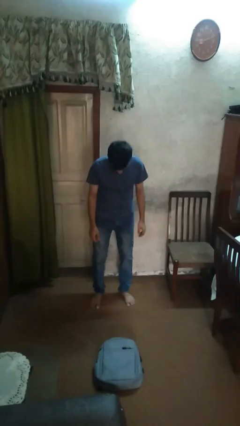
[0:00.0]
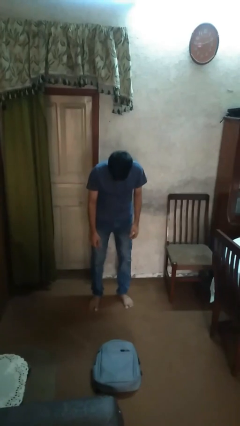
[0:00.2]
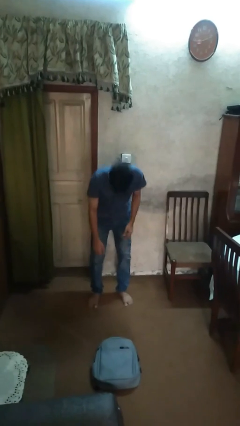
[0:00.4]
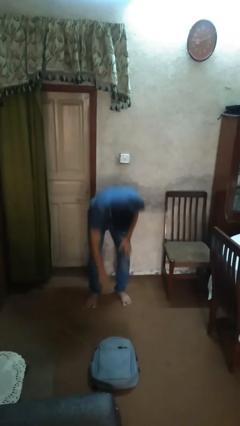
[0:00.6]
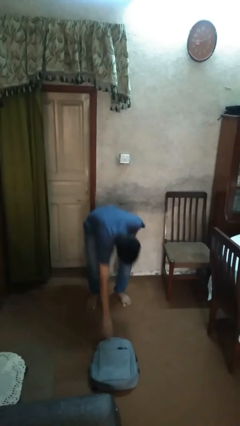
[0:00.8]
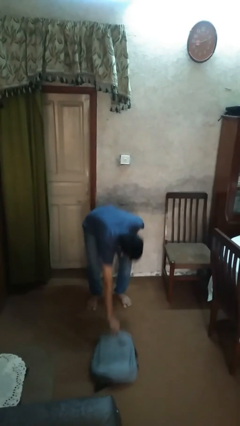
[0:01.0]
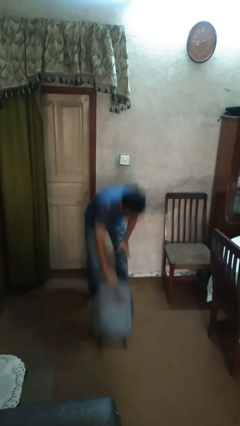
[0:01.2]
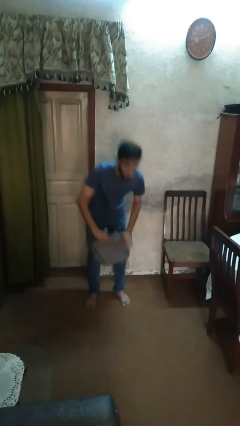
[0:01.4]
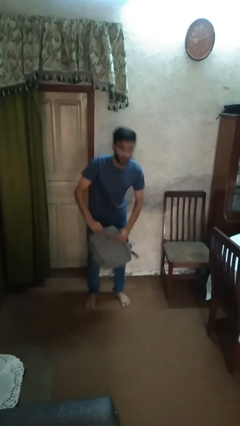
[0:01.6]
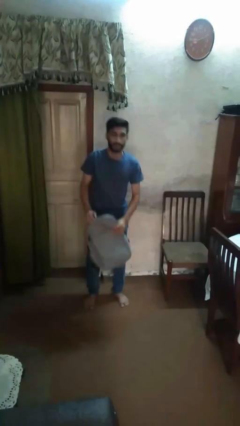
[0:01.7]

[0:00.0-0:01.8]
person picks up object from floor

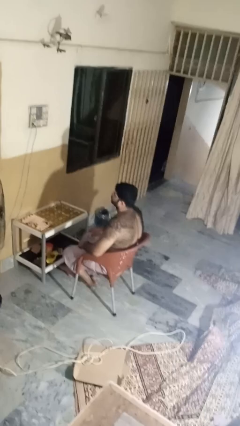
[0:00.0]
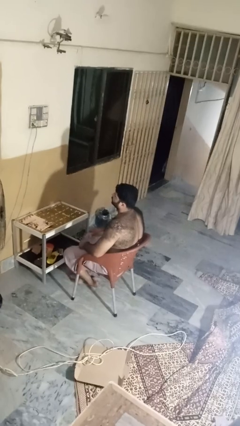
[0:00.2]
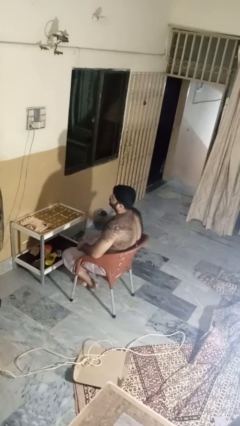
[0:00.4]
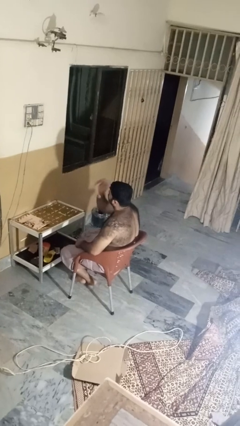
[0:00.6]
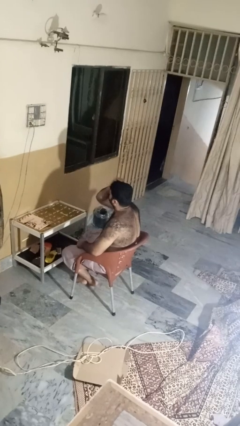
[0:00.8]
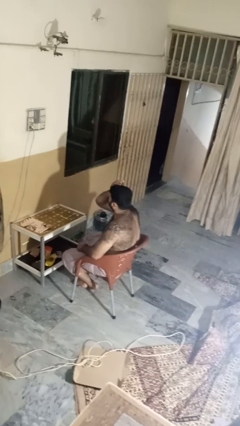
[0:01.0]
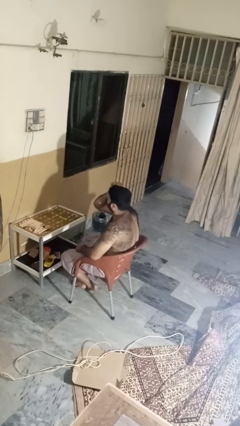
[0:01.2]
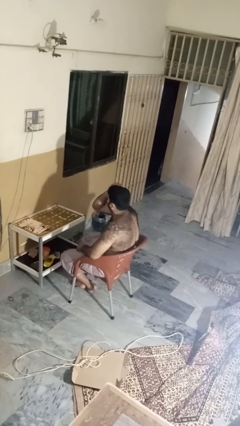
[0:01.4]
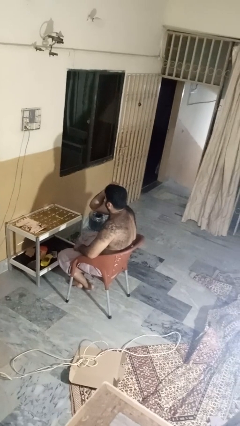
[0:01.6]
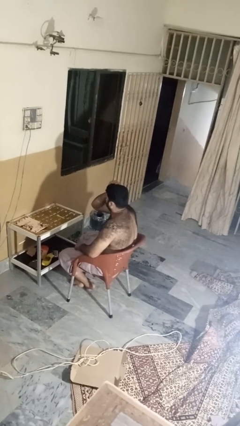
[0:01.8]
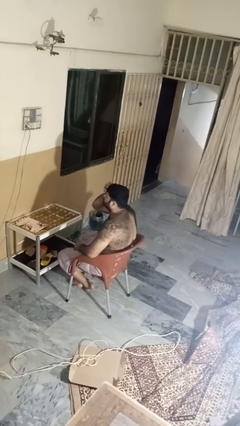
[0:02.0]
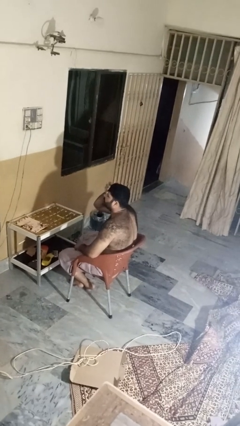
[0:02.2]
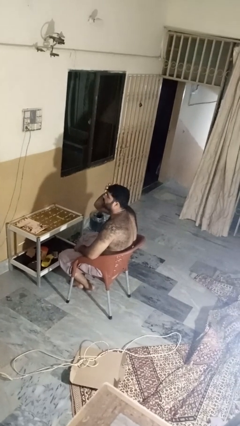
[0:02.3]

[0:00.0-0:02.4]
person rubs eyes

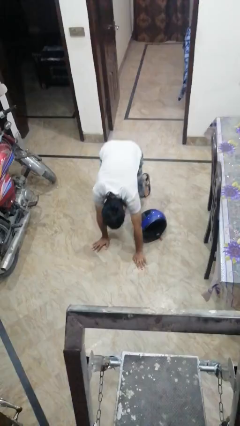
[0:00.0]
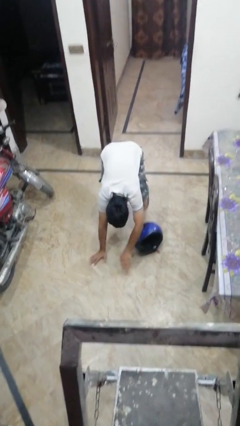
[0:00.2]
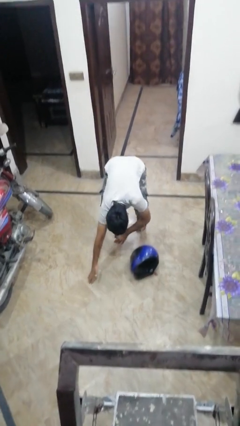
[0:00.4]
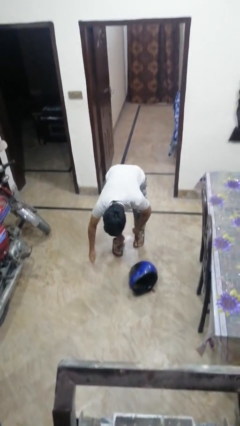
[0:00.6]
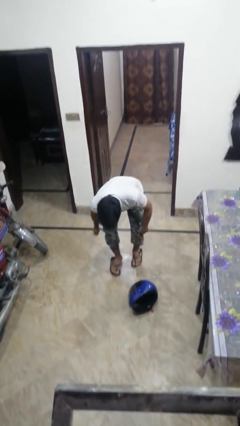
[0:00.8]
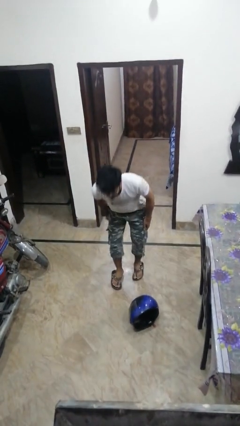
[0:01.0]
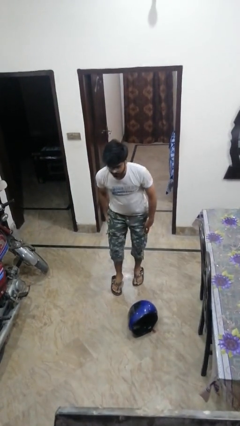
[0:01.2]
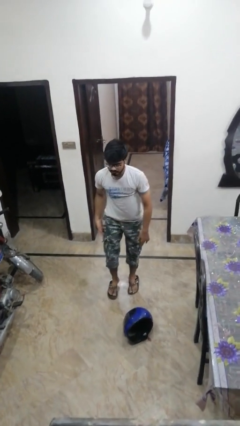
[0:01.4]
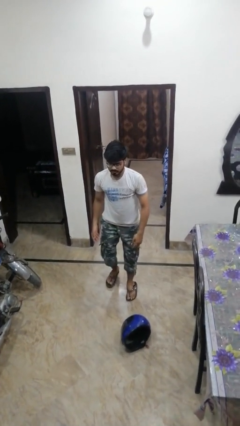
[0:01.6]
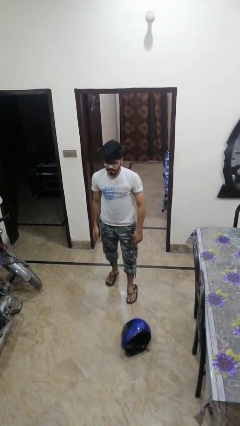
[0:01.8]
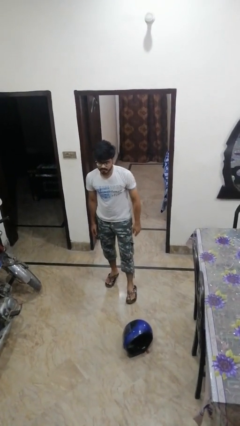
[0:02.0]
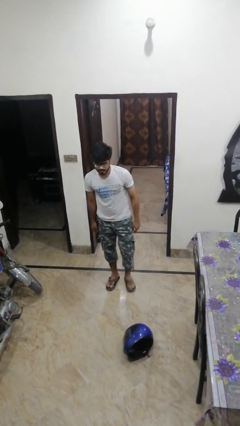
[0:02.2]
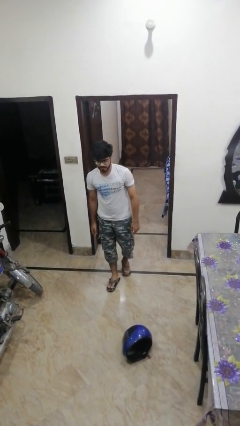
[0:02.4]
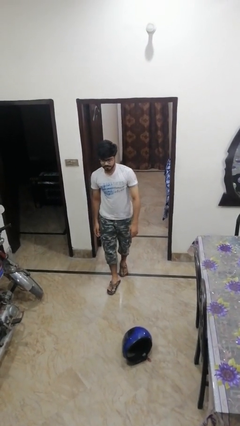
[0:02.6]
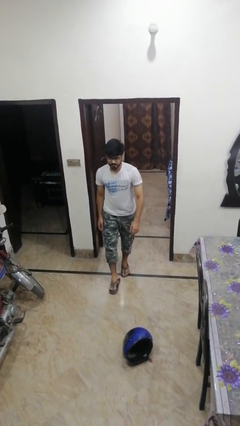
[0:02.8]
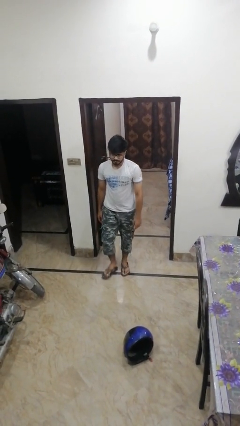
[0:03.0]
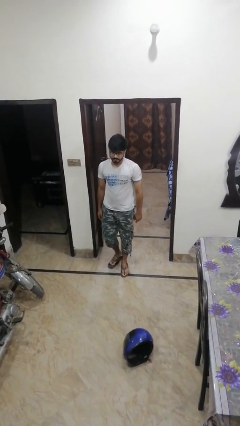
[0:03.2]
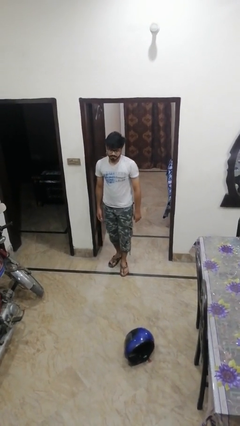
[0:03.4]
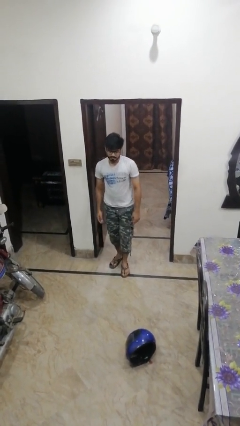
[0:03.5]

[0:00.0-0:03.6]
person stands up from floor

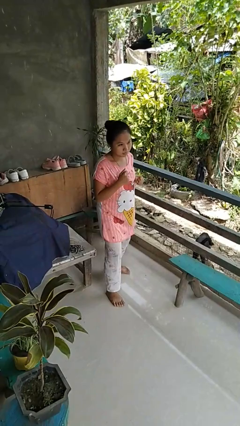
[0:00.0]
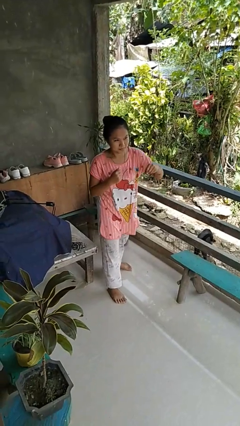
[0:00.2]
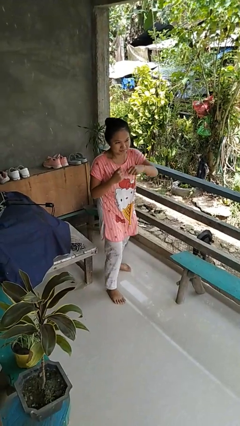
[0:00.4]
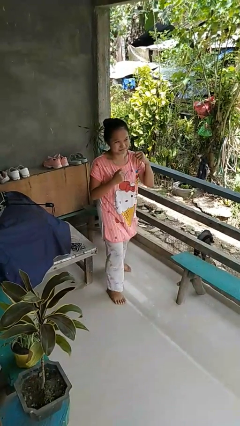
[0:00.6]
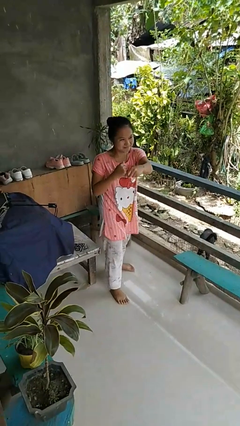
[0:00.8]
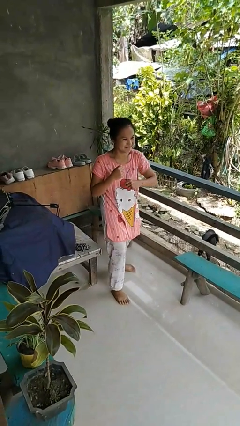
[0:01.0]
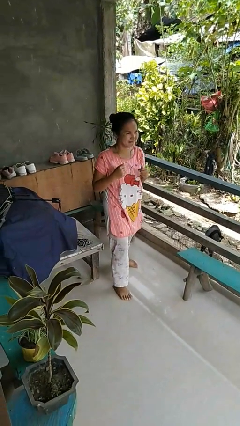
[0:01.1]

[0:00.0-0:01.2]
person punches

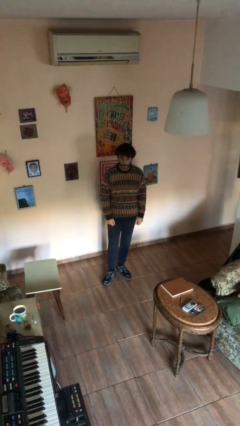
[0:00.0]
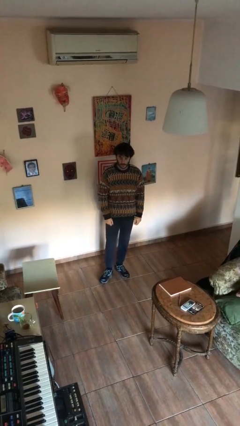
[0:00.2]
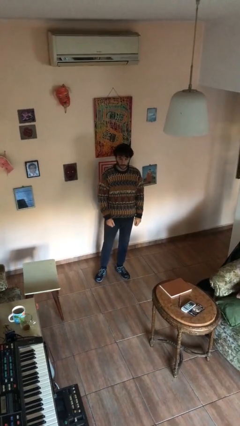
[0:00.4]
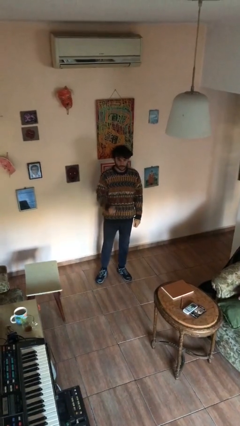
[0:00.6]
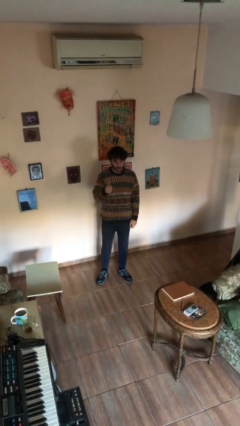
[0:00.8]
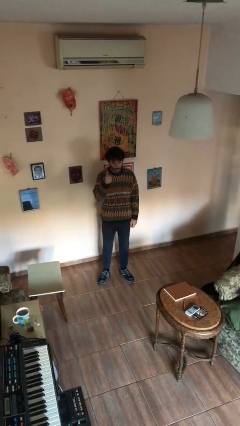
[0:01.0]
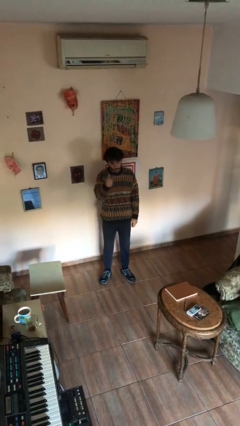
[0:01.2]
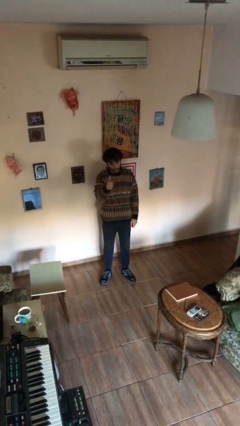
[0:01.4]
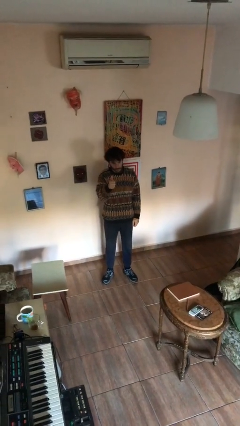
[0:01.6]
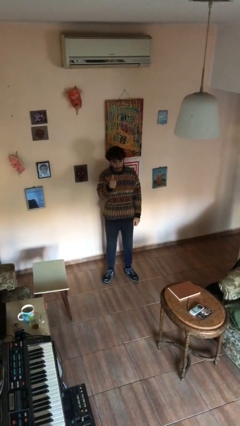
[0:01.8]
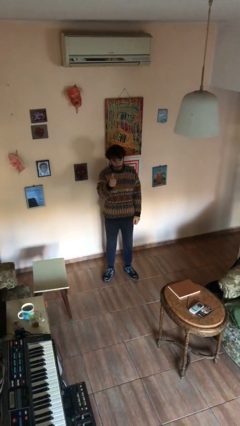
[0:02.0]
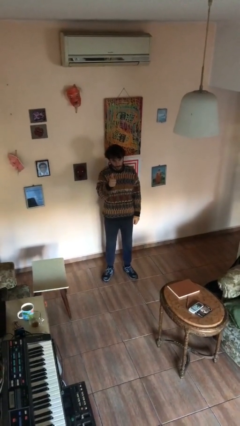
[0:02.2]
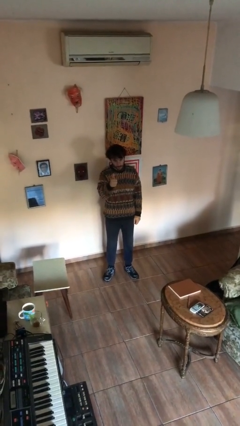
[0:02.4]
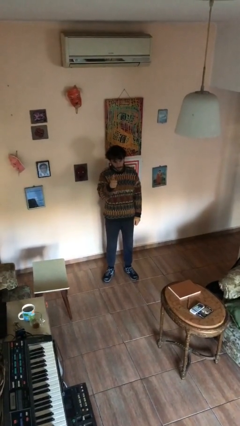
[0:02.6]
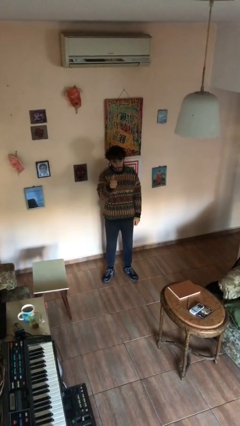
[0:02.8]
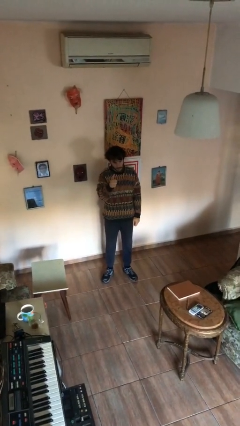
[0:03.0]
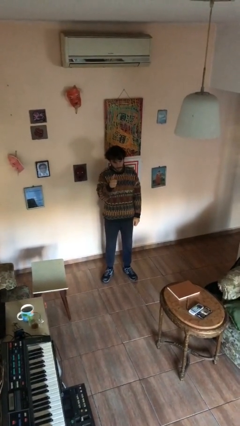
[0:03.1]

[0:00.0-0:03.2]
person gestures thumbs up

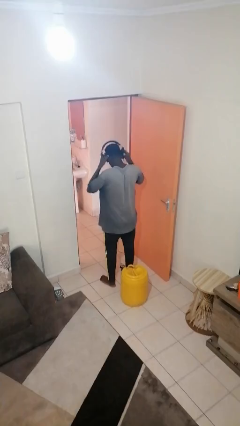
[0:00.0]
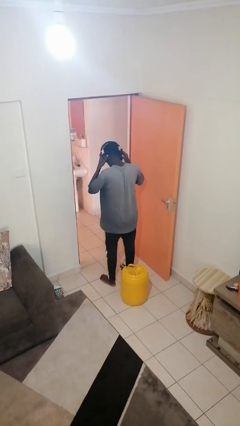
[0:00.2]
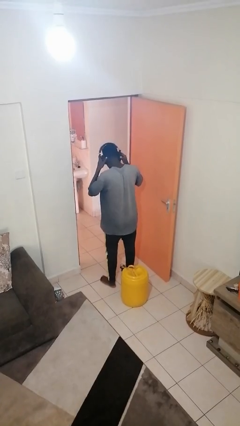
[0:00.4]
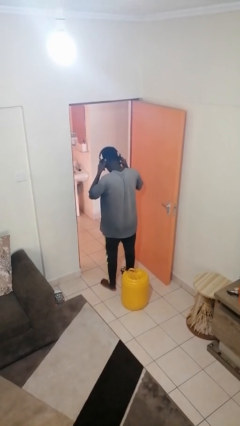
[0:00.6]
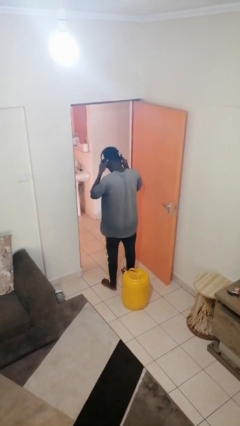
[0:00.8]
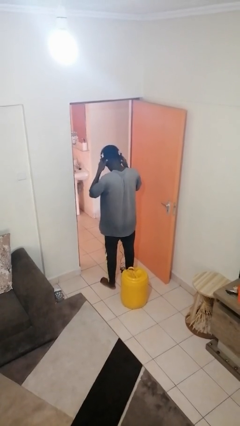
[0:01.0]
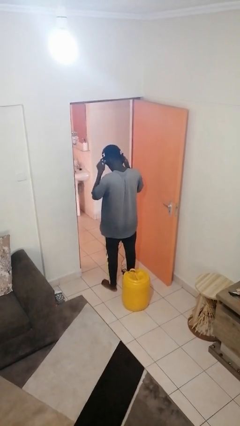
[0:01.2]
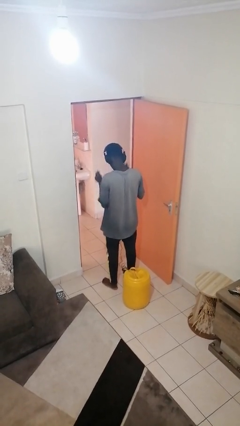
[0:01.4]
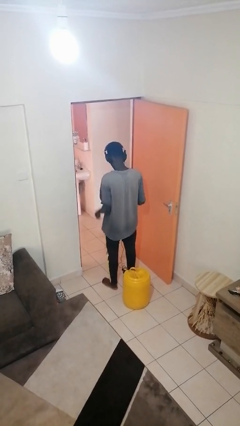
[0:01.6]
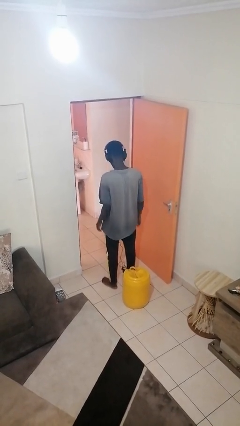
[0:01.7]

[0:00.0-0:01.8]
person puts on headphones

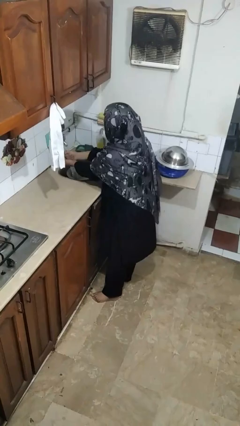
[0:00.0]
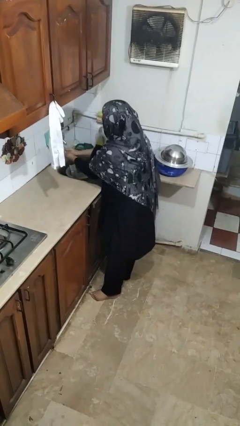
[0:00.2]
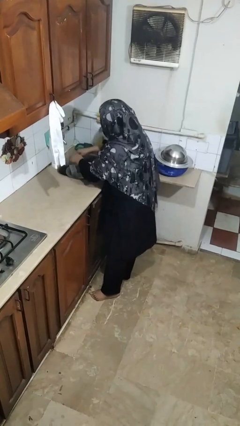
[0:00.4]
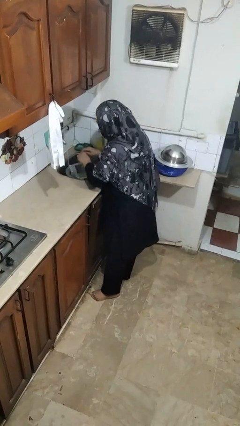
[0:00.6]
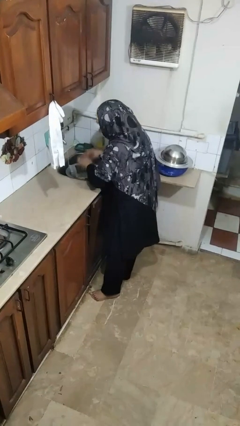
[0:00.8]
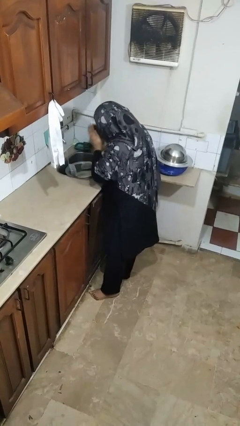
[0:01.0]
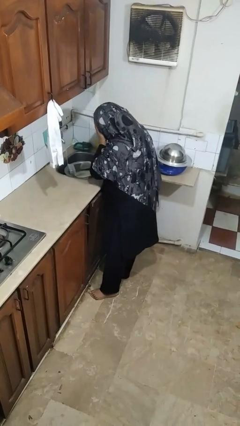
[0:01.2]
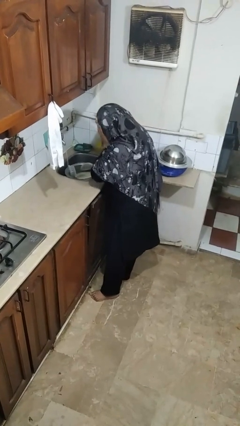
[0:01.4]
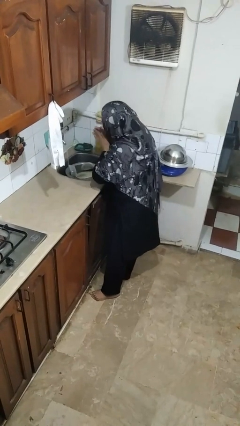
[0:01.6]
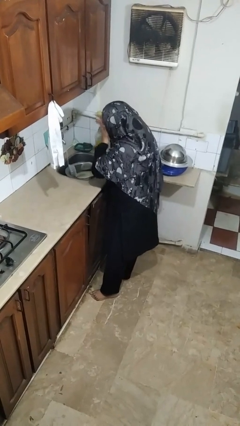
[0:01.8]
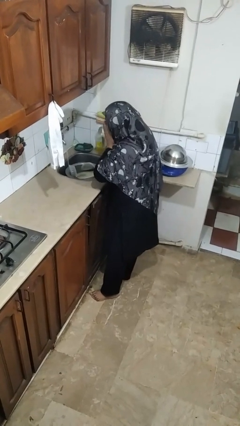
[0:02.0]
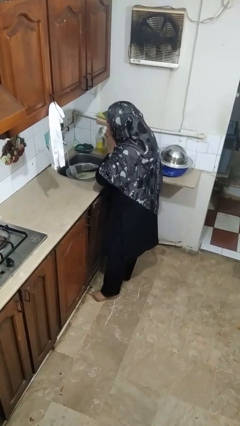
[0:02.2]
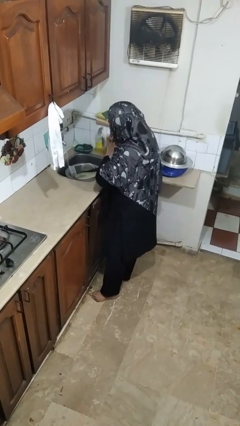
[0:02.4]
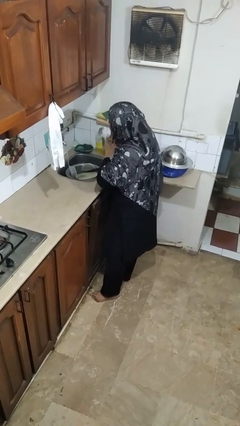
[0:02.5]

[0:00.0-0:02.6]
person washes face

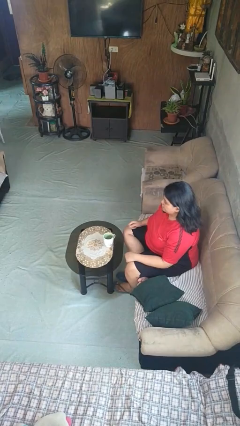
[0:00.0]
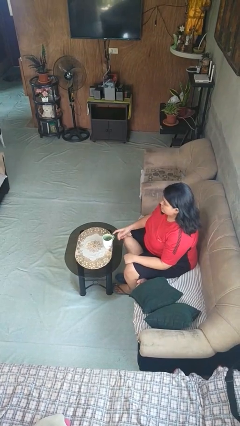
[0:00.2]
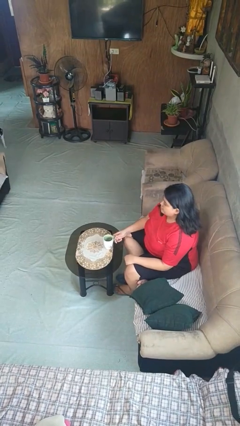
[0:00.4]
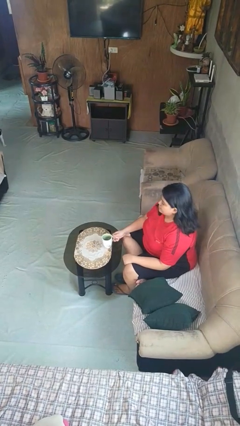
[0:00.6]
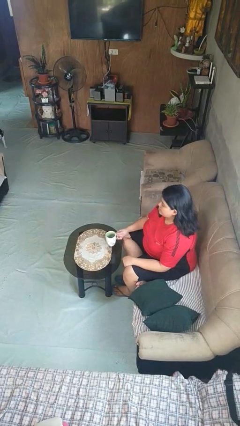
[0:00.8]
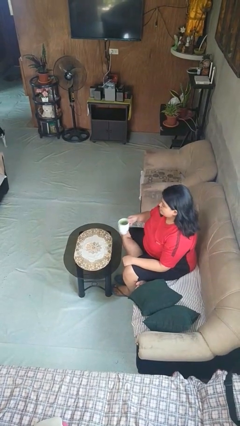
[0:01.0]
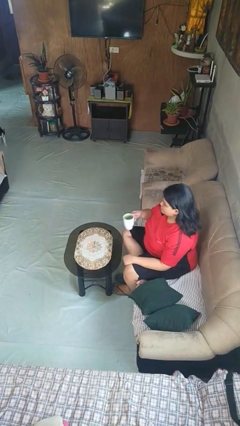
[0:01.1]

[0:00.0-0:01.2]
person picks up object from table
